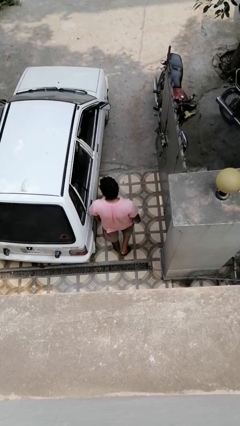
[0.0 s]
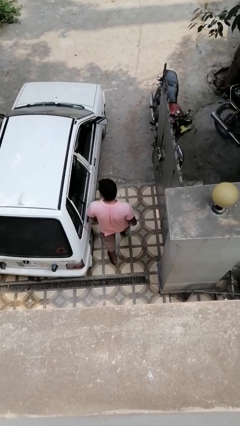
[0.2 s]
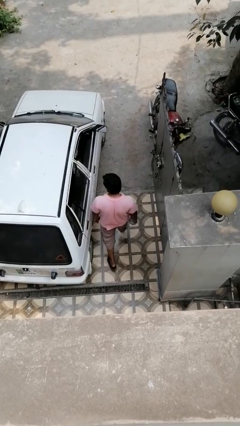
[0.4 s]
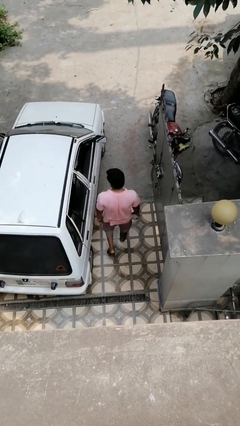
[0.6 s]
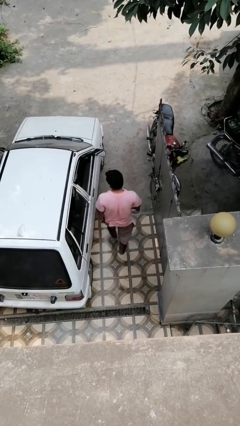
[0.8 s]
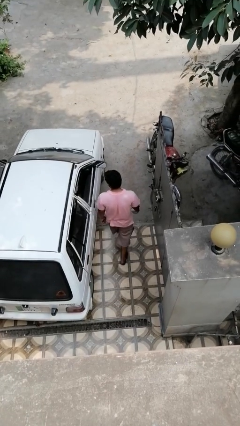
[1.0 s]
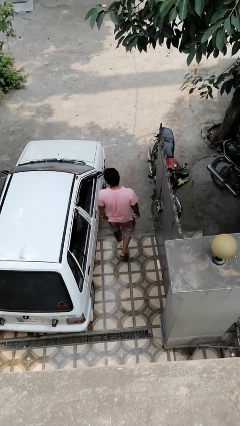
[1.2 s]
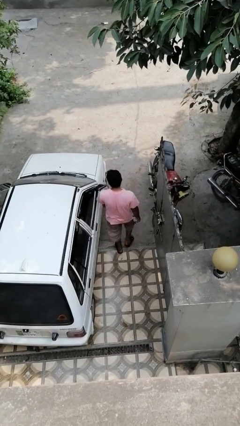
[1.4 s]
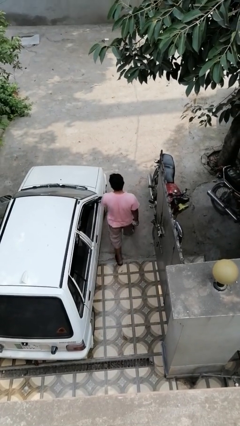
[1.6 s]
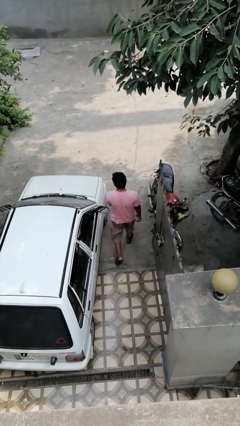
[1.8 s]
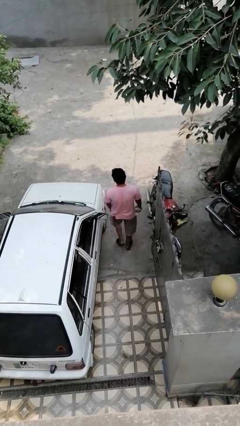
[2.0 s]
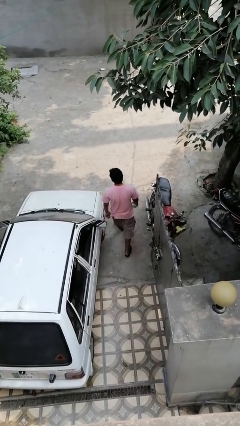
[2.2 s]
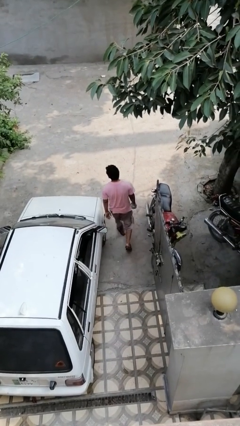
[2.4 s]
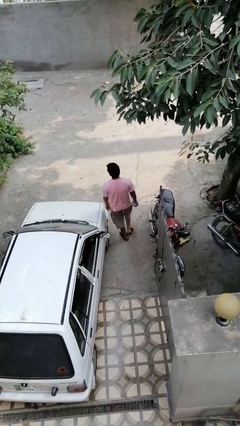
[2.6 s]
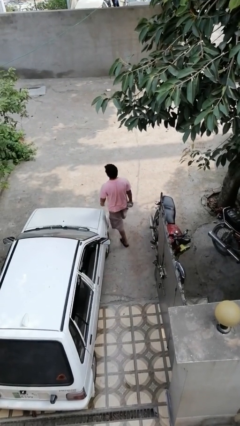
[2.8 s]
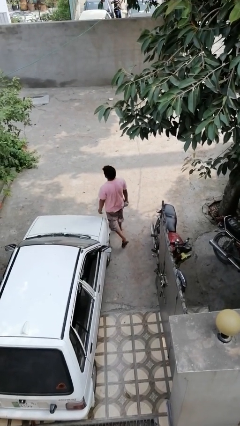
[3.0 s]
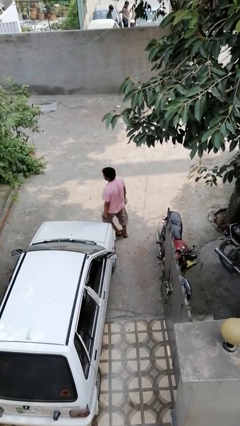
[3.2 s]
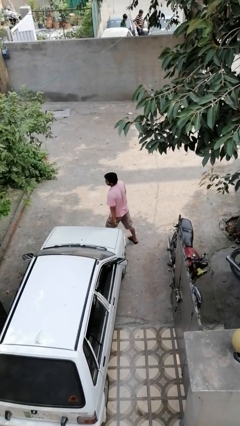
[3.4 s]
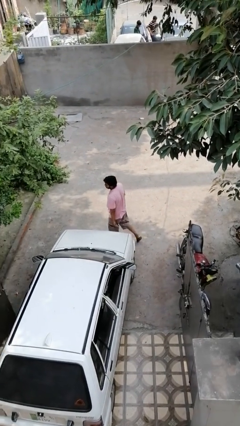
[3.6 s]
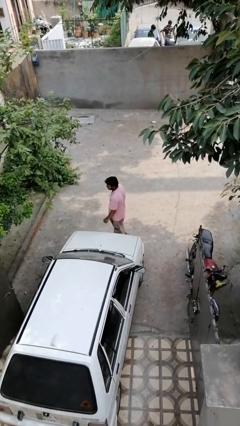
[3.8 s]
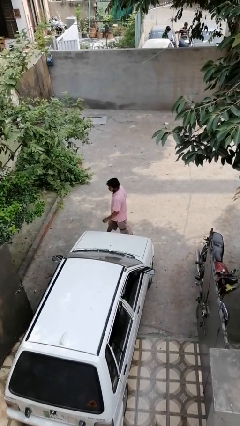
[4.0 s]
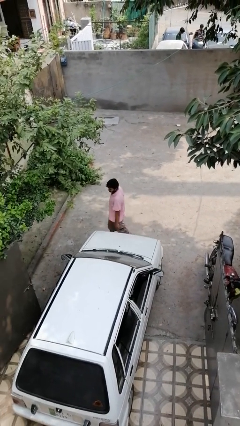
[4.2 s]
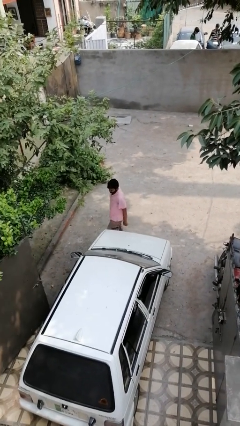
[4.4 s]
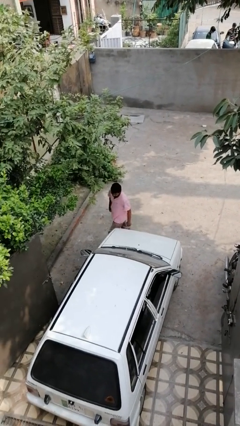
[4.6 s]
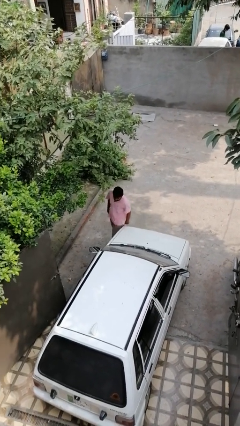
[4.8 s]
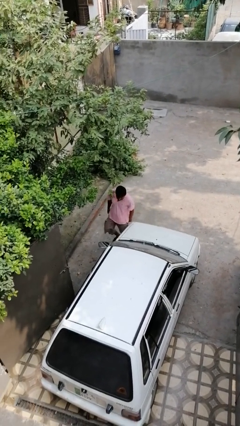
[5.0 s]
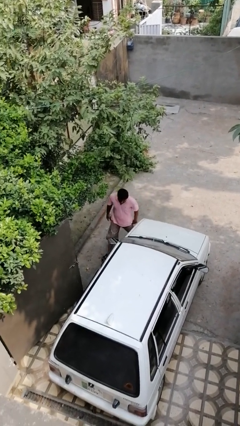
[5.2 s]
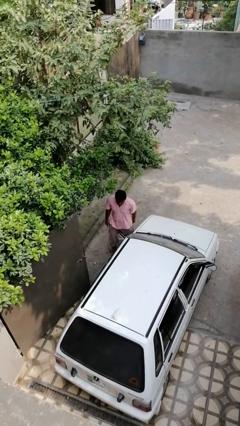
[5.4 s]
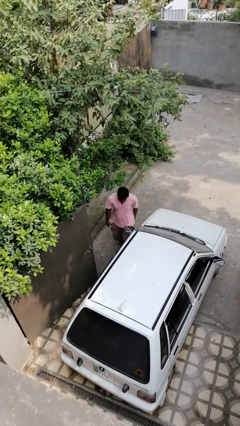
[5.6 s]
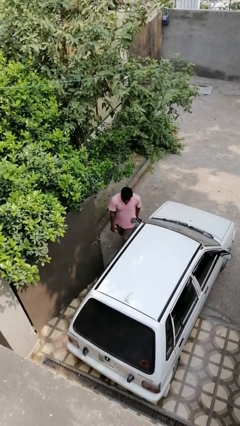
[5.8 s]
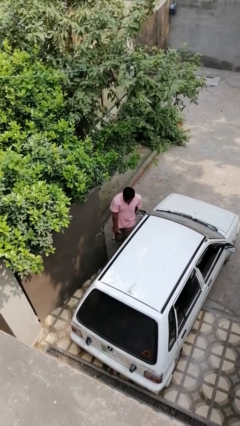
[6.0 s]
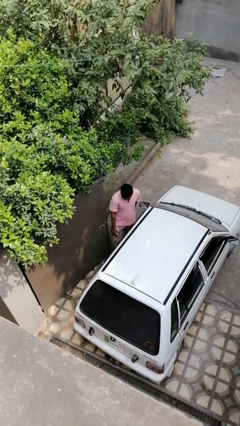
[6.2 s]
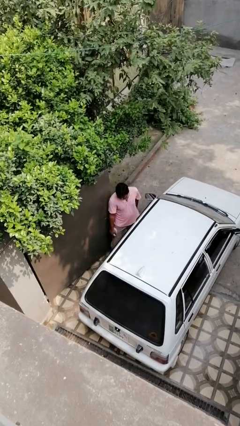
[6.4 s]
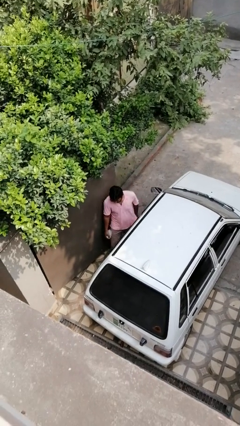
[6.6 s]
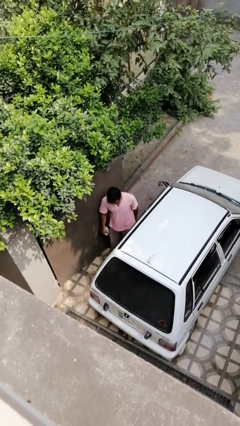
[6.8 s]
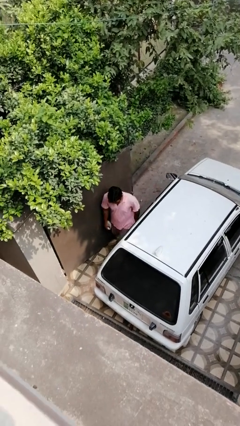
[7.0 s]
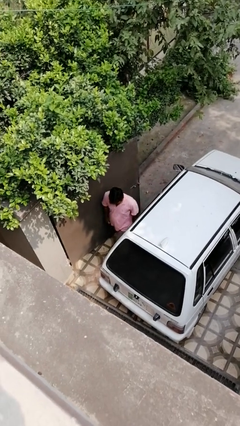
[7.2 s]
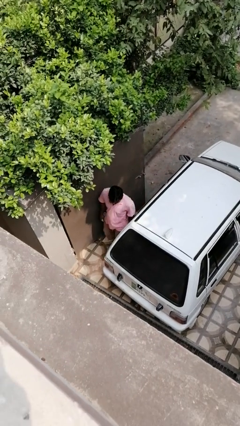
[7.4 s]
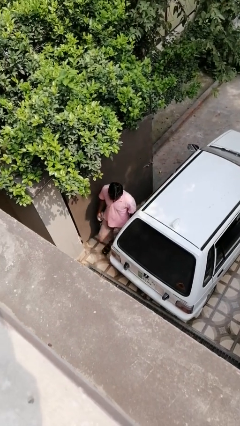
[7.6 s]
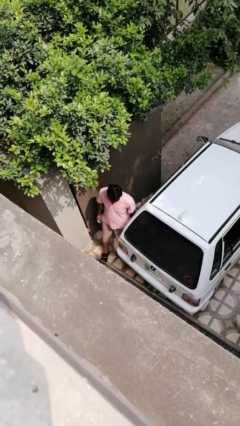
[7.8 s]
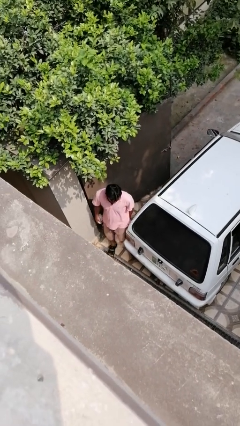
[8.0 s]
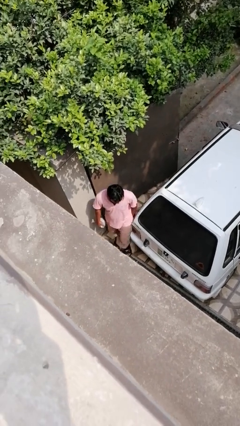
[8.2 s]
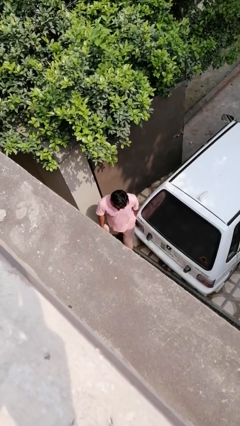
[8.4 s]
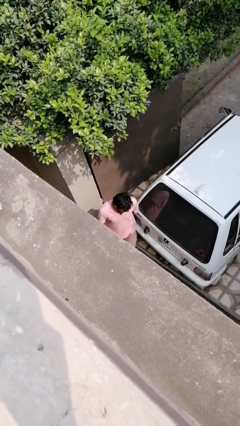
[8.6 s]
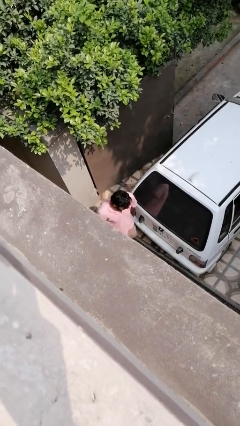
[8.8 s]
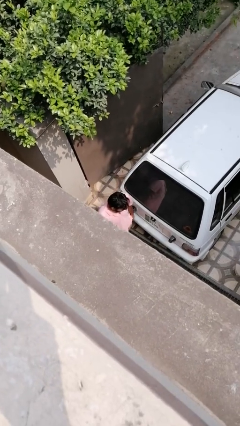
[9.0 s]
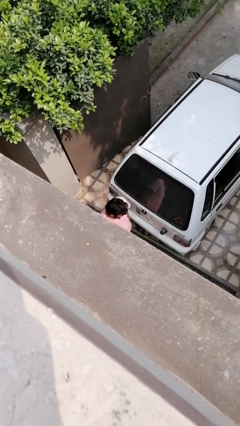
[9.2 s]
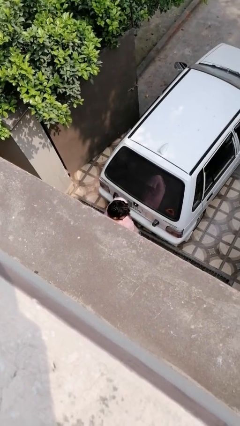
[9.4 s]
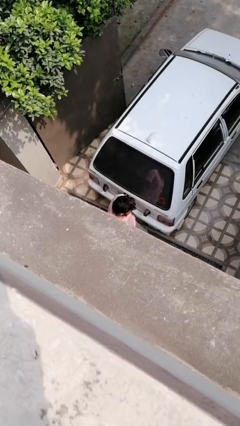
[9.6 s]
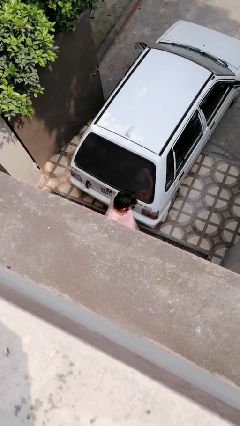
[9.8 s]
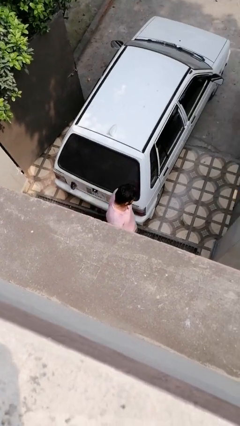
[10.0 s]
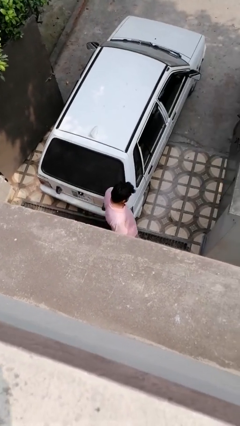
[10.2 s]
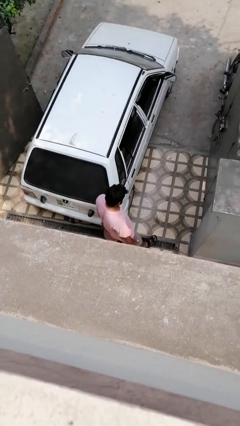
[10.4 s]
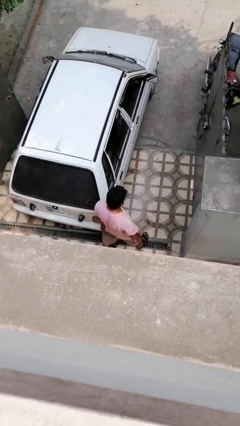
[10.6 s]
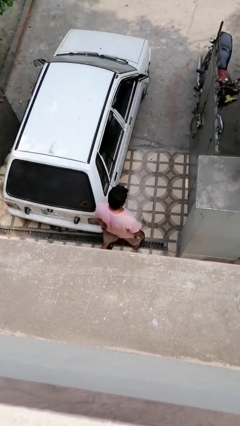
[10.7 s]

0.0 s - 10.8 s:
person walks around car

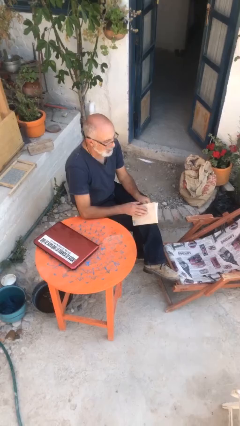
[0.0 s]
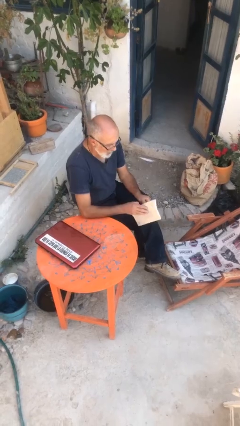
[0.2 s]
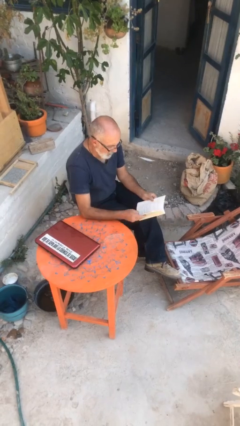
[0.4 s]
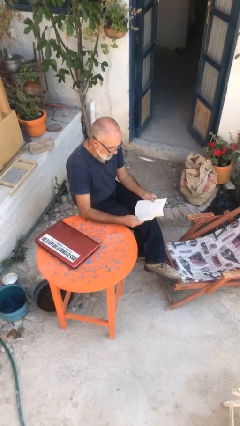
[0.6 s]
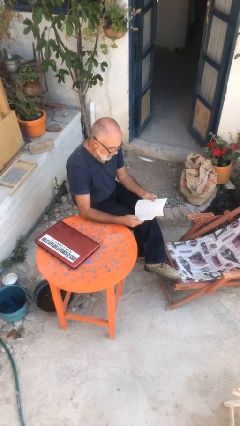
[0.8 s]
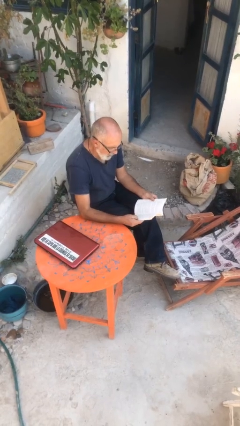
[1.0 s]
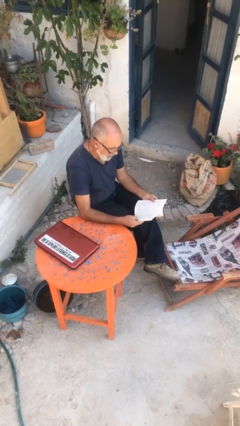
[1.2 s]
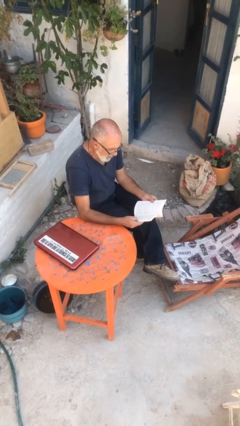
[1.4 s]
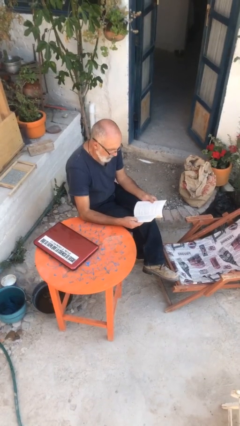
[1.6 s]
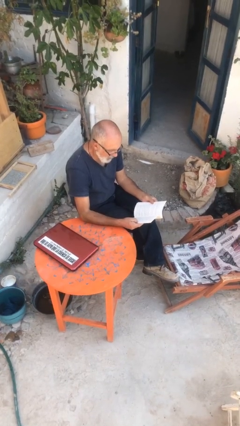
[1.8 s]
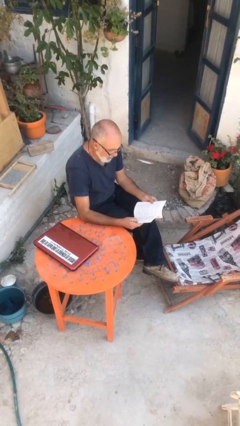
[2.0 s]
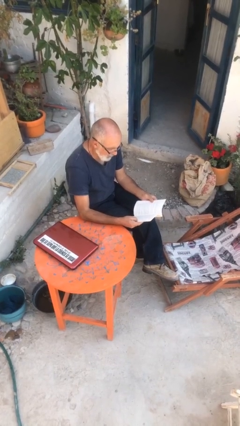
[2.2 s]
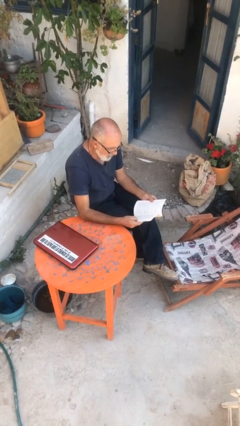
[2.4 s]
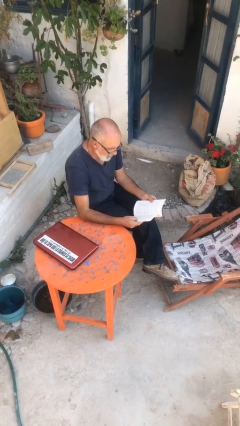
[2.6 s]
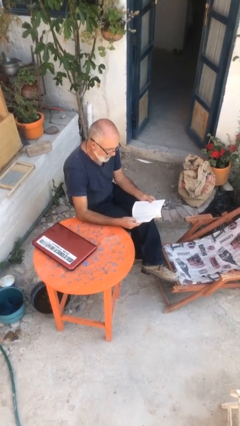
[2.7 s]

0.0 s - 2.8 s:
person reads document

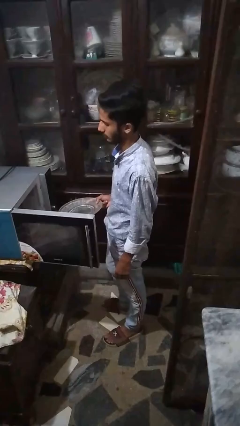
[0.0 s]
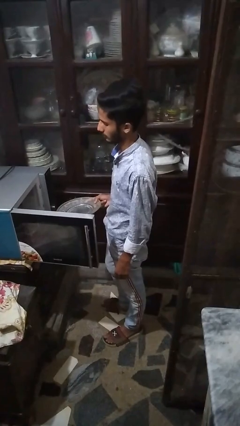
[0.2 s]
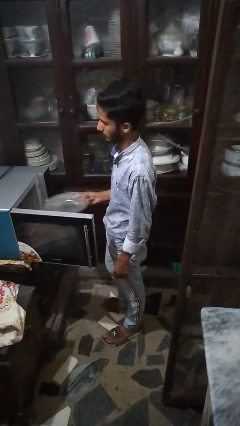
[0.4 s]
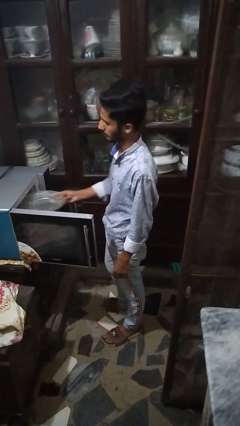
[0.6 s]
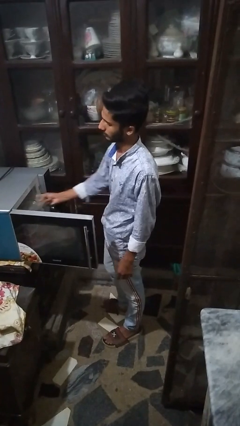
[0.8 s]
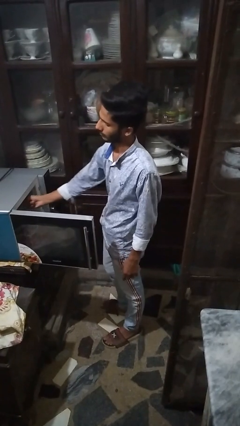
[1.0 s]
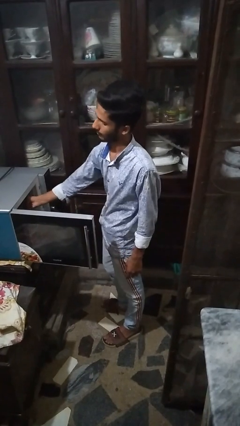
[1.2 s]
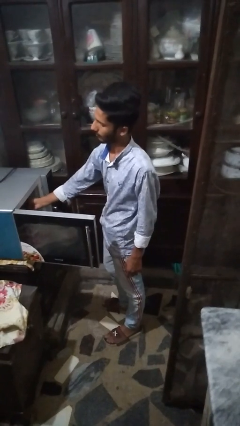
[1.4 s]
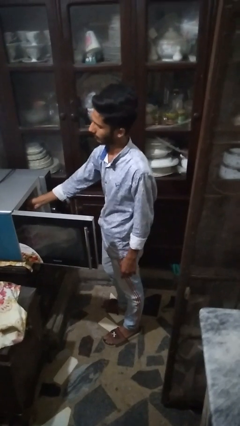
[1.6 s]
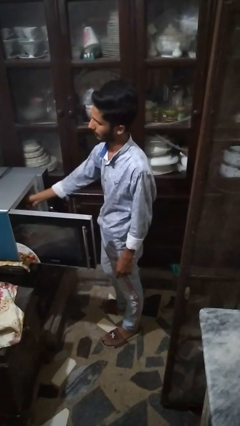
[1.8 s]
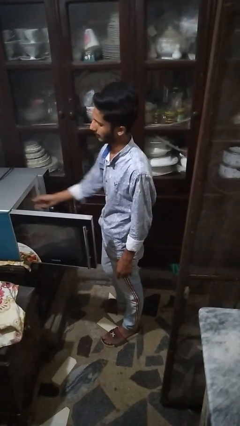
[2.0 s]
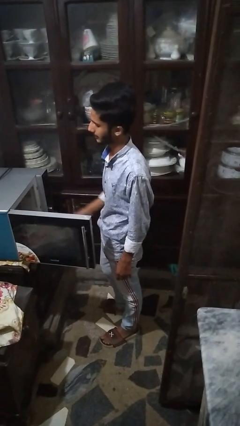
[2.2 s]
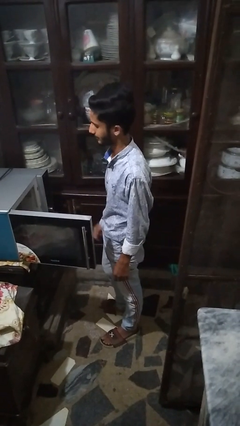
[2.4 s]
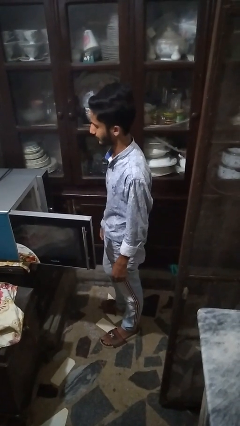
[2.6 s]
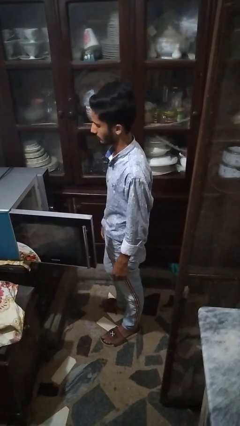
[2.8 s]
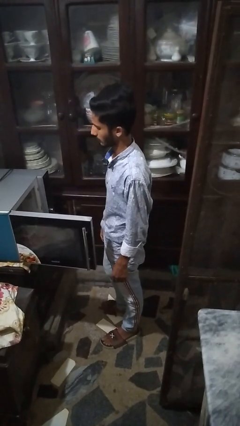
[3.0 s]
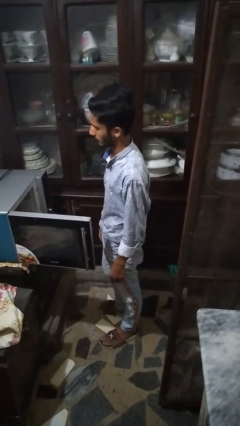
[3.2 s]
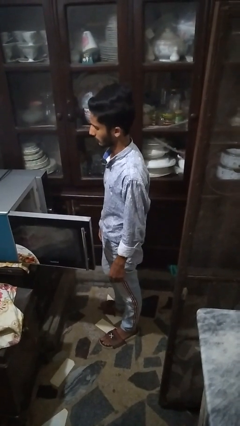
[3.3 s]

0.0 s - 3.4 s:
person puts object into microwave

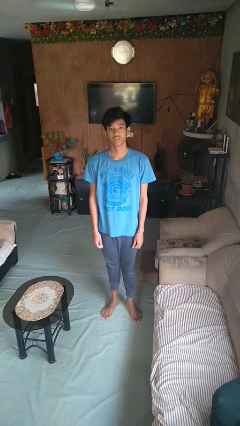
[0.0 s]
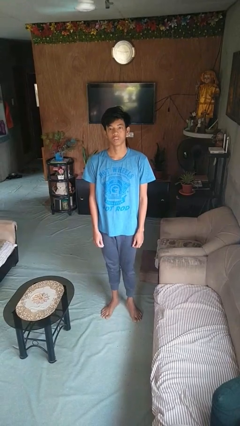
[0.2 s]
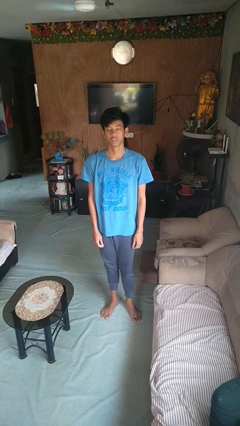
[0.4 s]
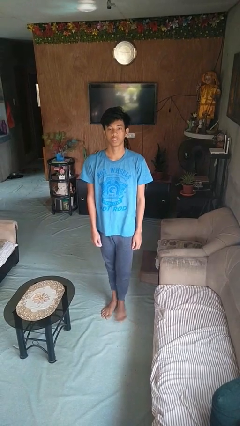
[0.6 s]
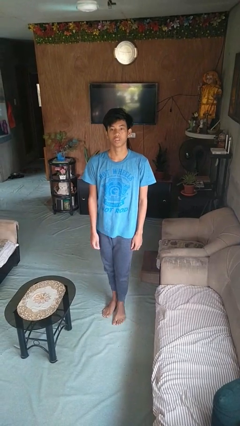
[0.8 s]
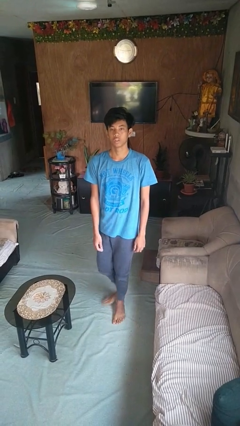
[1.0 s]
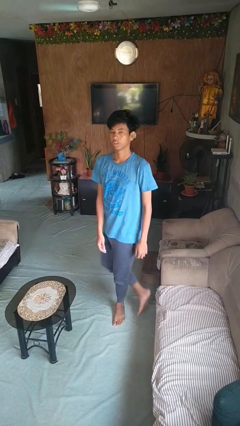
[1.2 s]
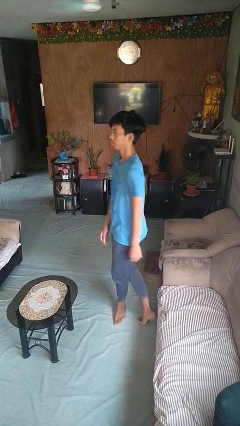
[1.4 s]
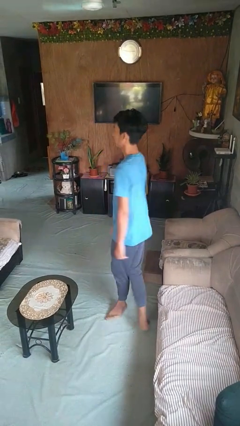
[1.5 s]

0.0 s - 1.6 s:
person twirls
